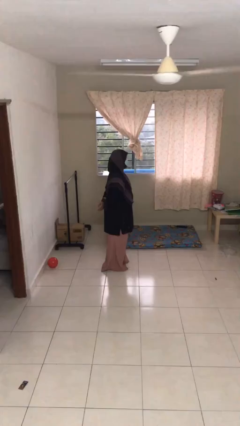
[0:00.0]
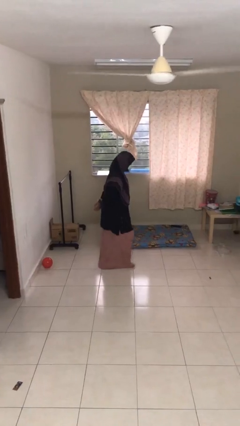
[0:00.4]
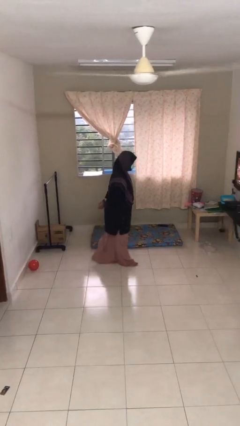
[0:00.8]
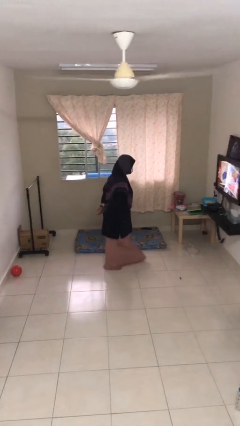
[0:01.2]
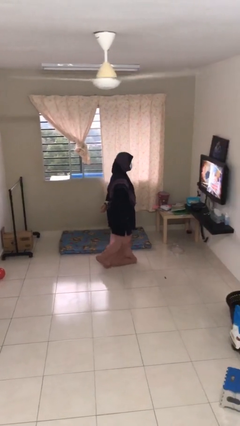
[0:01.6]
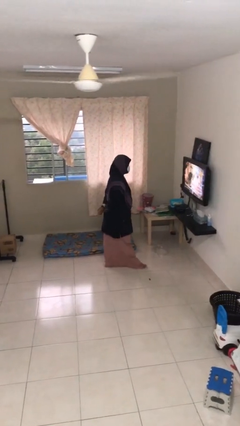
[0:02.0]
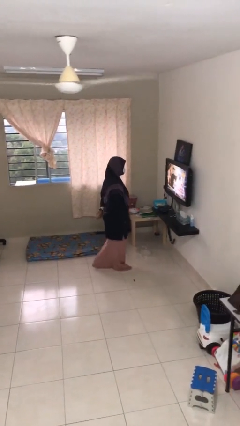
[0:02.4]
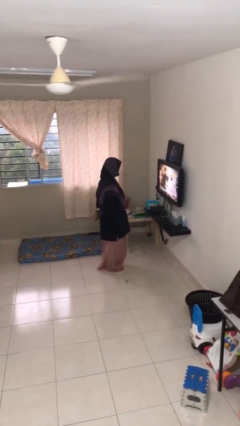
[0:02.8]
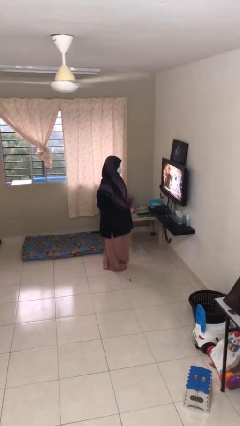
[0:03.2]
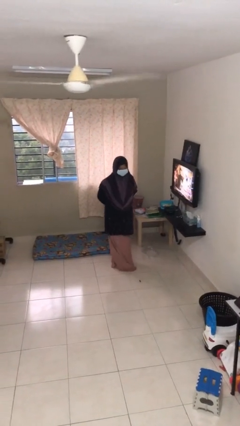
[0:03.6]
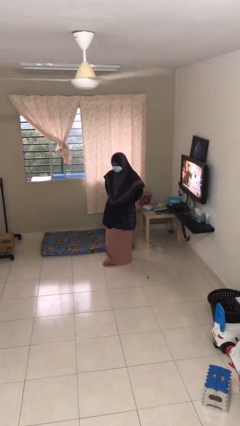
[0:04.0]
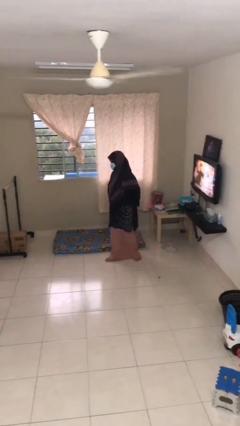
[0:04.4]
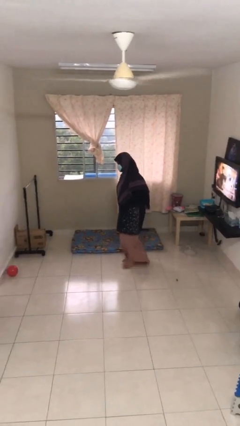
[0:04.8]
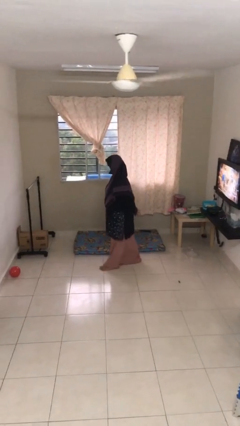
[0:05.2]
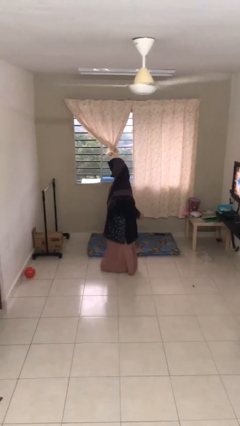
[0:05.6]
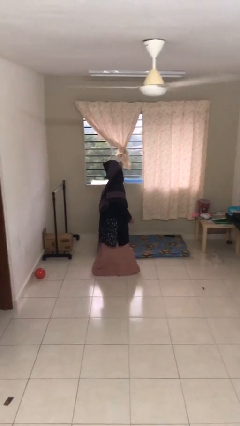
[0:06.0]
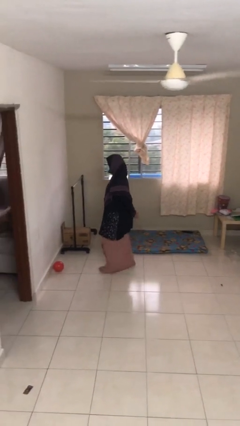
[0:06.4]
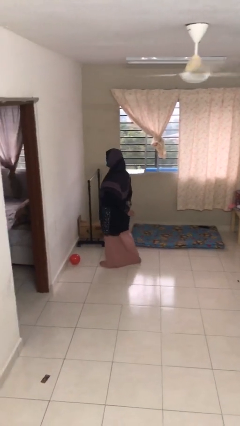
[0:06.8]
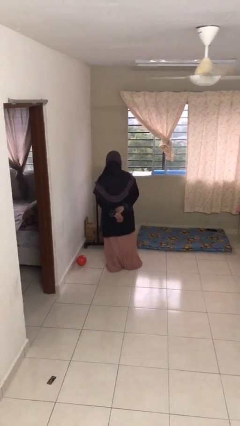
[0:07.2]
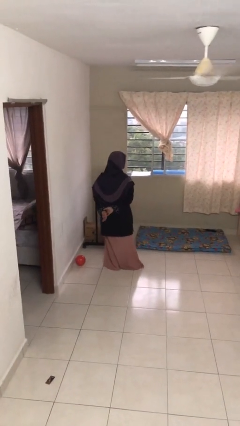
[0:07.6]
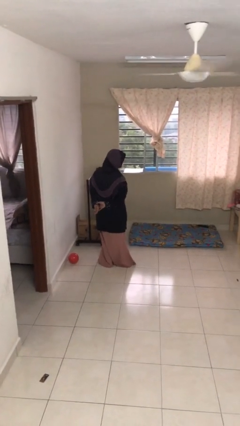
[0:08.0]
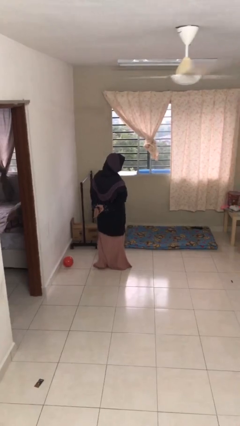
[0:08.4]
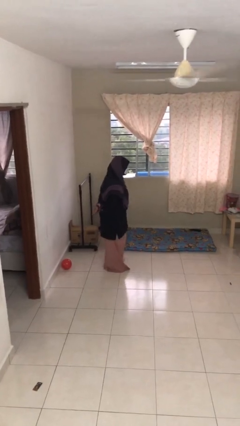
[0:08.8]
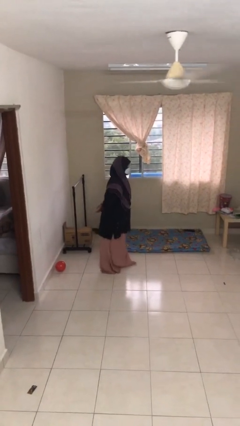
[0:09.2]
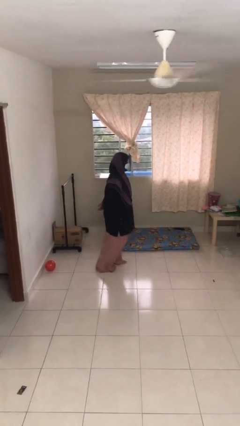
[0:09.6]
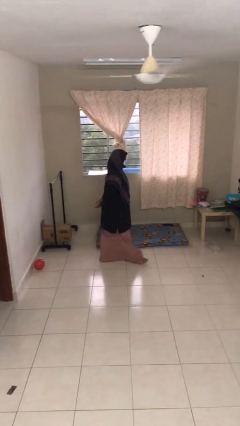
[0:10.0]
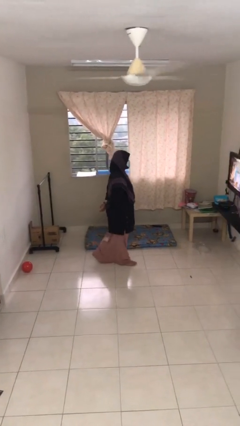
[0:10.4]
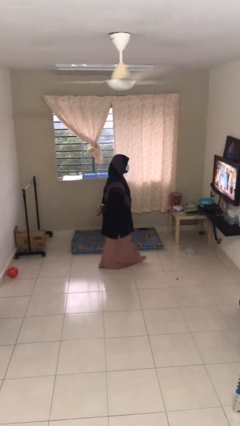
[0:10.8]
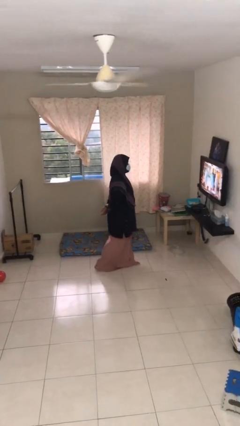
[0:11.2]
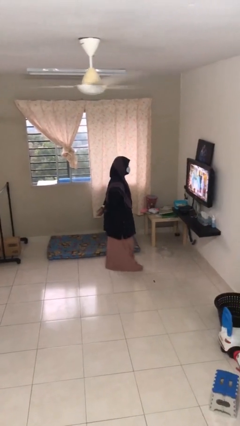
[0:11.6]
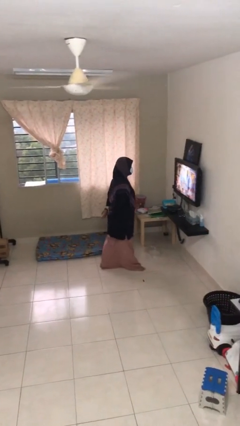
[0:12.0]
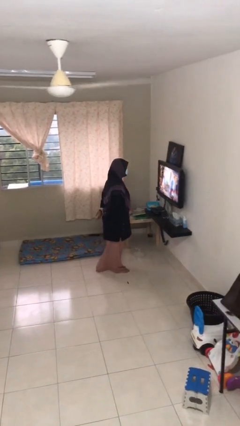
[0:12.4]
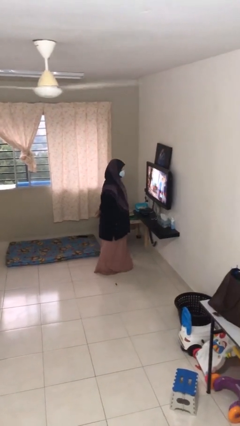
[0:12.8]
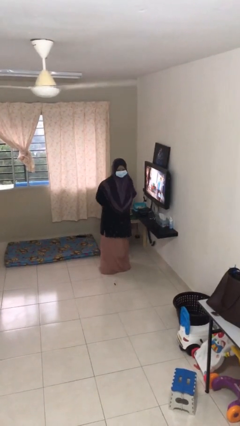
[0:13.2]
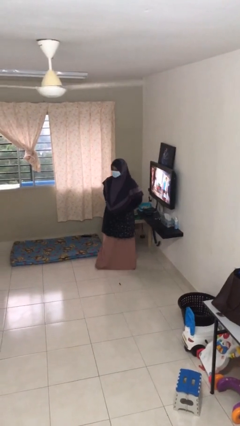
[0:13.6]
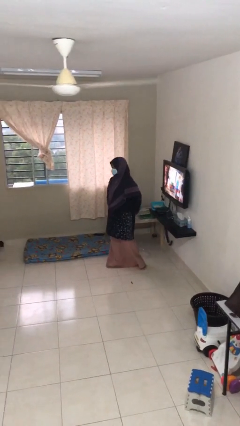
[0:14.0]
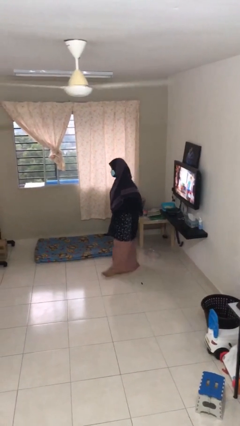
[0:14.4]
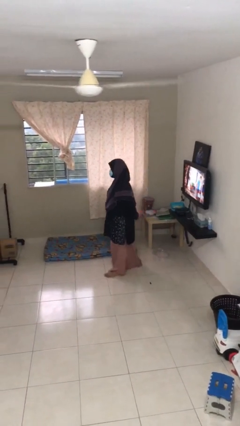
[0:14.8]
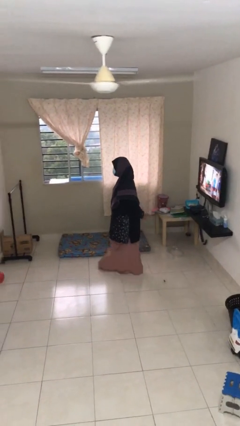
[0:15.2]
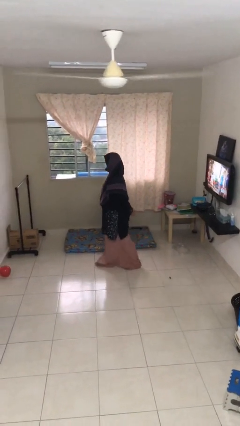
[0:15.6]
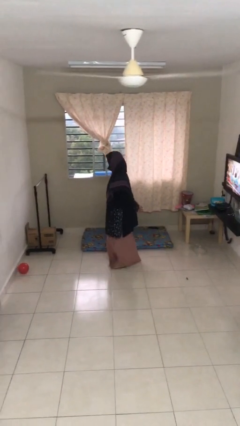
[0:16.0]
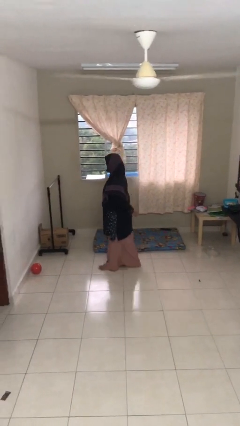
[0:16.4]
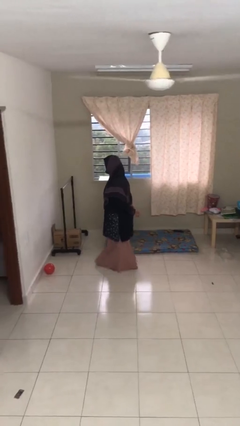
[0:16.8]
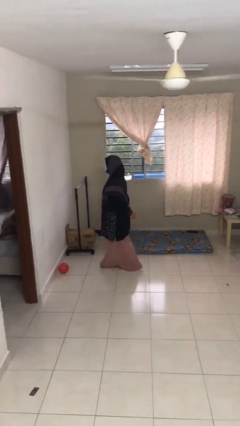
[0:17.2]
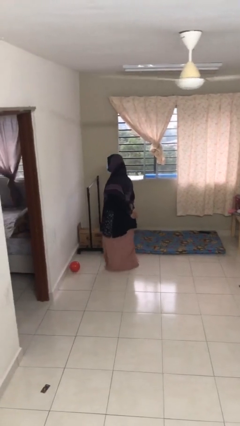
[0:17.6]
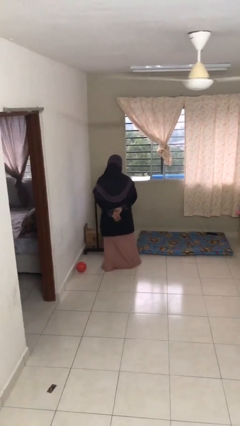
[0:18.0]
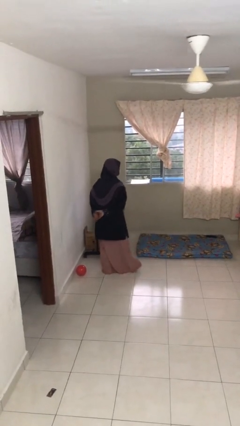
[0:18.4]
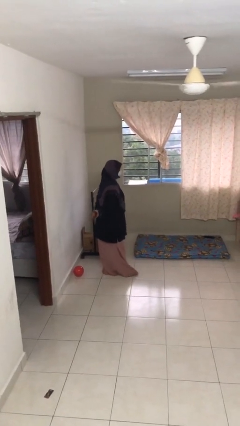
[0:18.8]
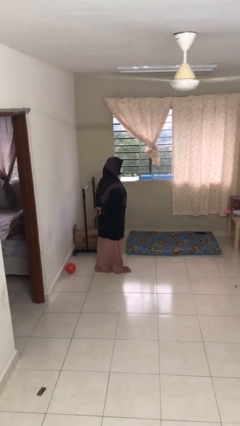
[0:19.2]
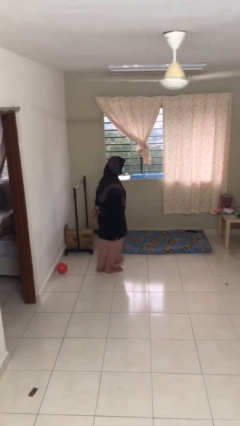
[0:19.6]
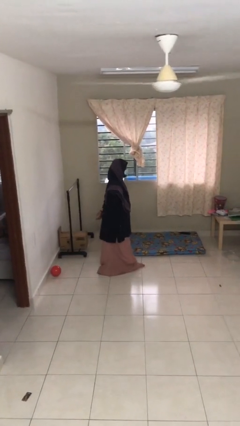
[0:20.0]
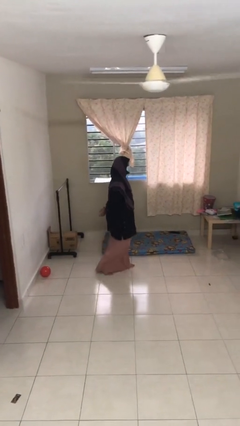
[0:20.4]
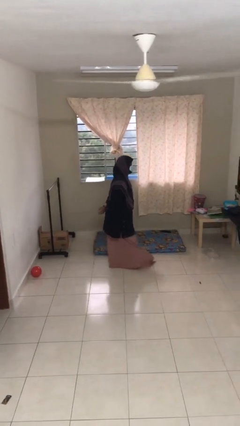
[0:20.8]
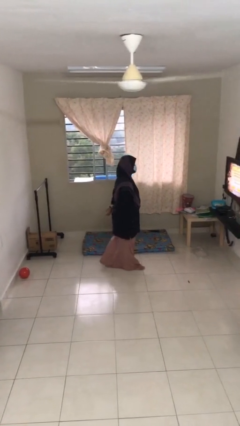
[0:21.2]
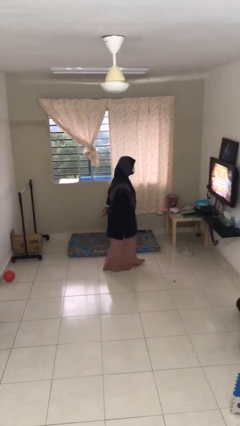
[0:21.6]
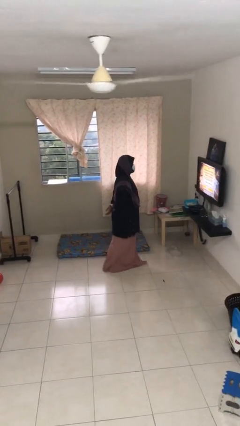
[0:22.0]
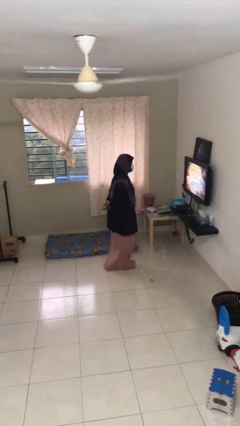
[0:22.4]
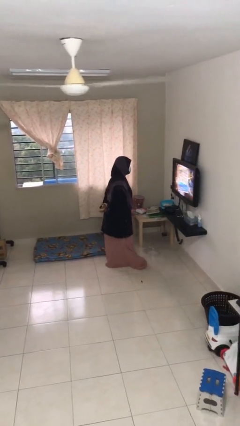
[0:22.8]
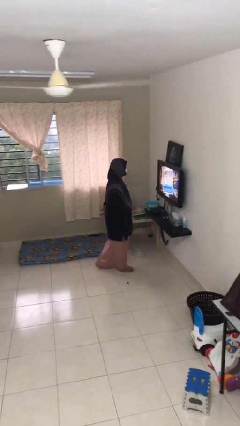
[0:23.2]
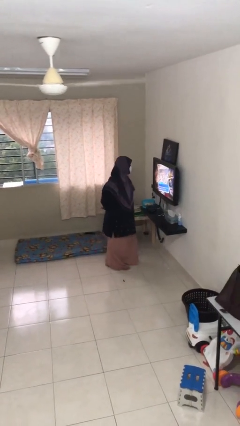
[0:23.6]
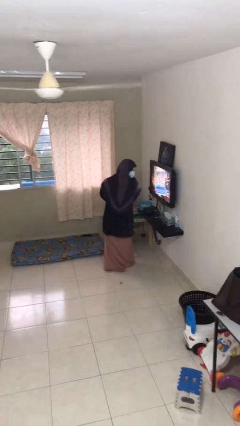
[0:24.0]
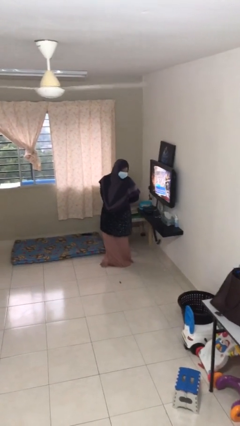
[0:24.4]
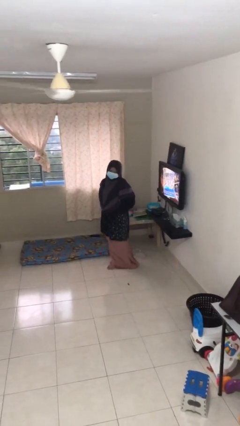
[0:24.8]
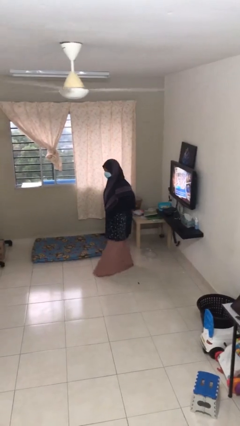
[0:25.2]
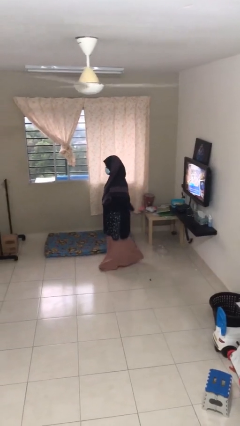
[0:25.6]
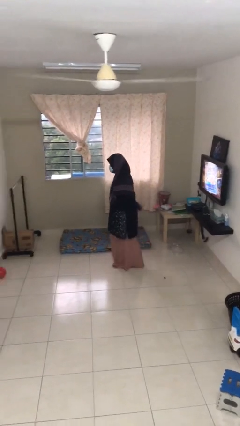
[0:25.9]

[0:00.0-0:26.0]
person walks

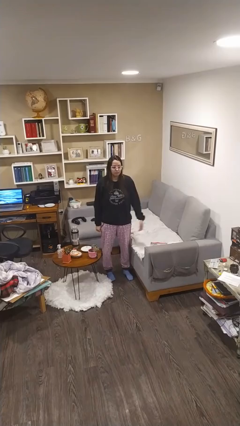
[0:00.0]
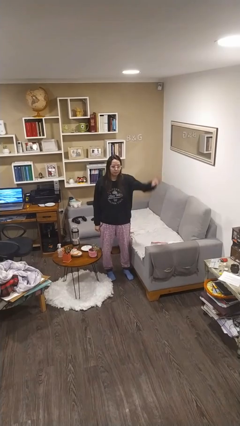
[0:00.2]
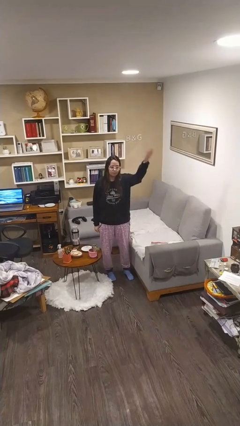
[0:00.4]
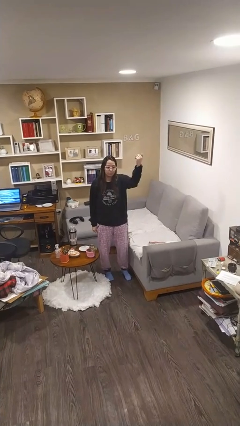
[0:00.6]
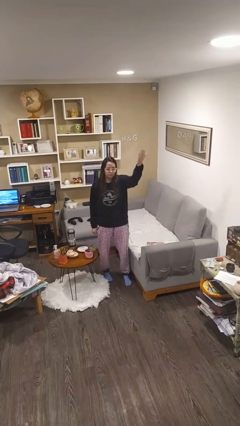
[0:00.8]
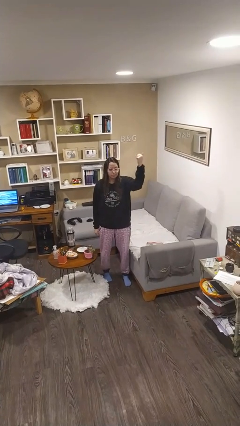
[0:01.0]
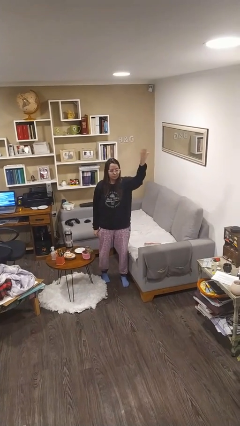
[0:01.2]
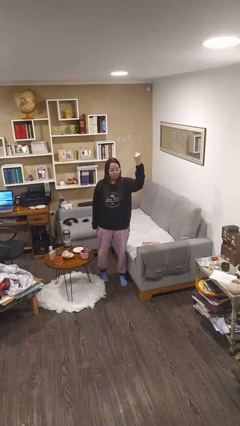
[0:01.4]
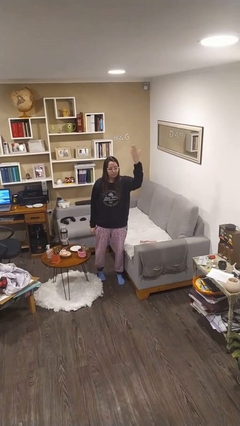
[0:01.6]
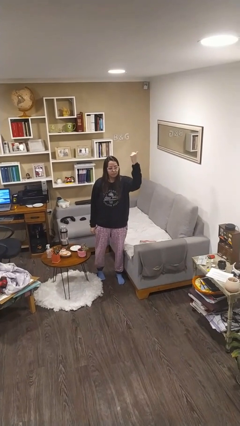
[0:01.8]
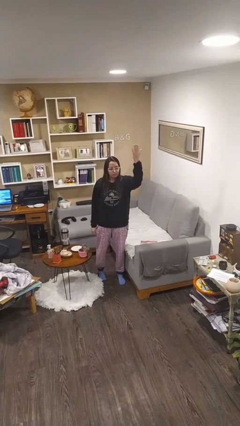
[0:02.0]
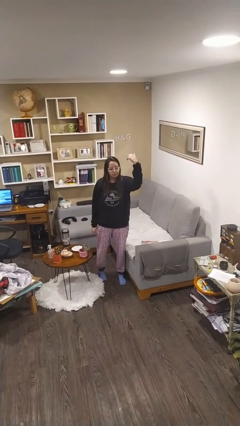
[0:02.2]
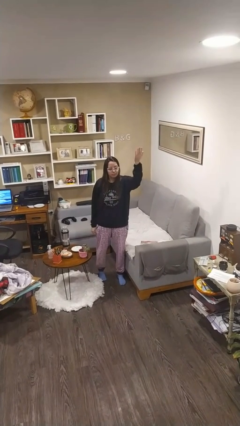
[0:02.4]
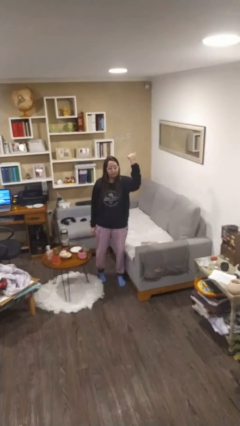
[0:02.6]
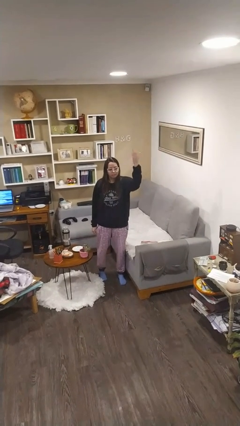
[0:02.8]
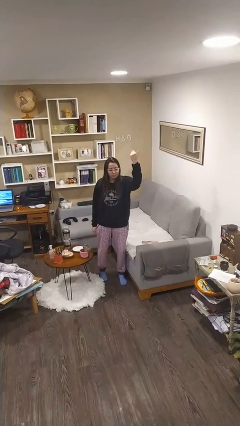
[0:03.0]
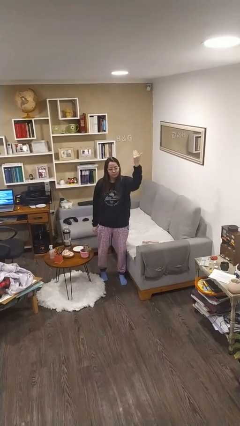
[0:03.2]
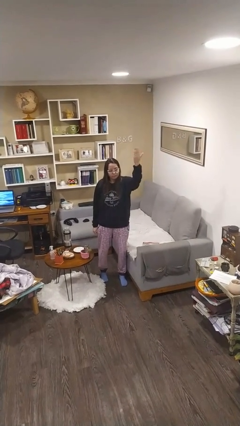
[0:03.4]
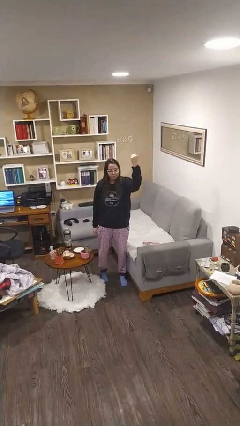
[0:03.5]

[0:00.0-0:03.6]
person gestures come here

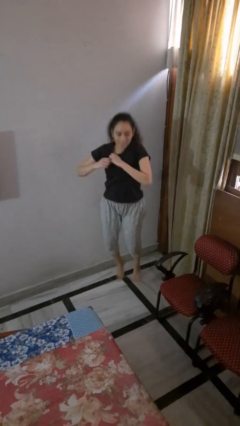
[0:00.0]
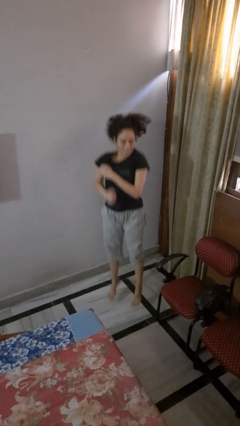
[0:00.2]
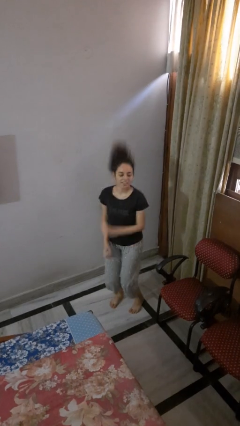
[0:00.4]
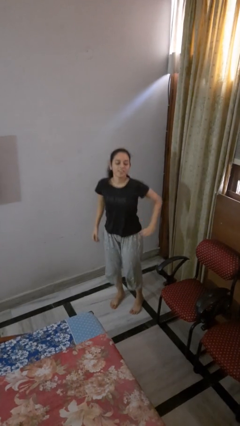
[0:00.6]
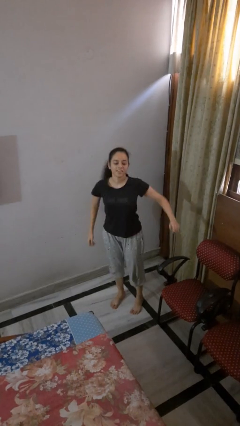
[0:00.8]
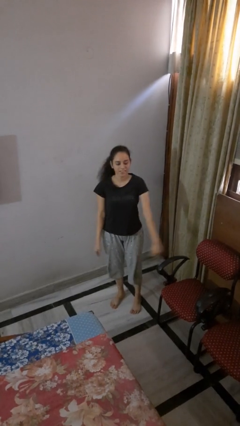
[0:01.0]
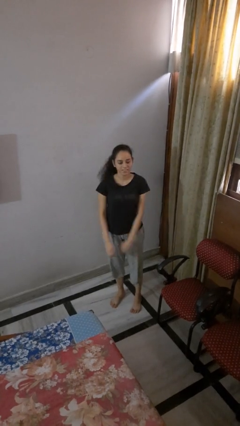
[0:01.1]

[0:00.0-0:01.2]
person jumps

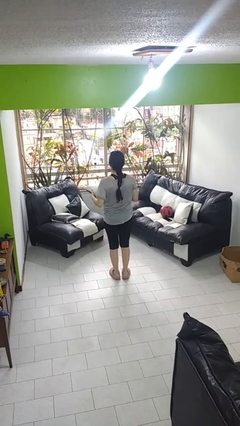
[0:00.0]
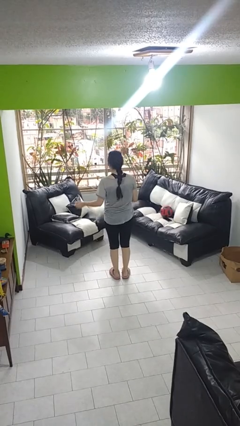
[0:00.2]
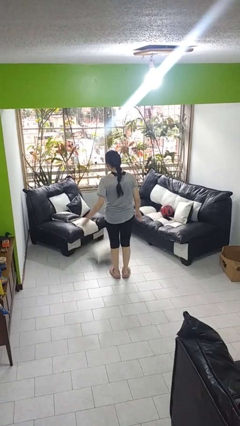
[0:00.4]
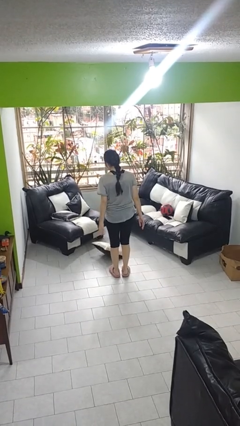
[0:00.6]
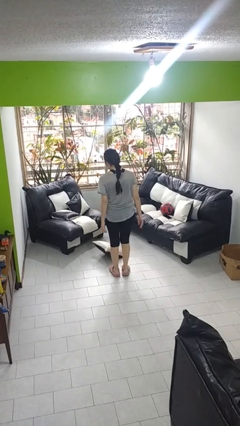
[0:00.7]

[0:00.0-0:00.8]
person drops object
